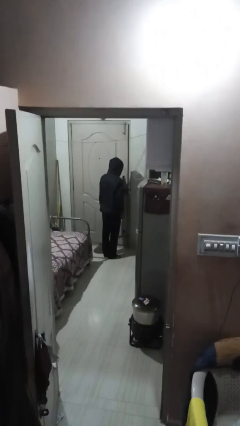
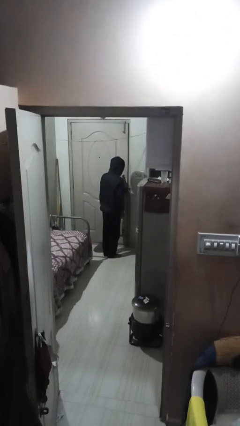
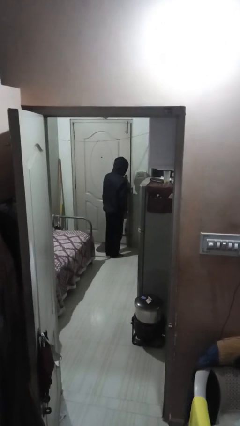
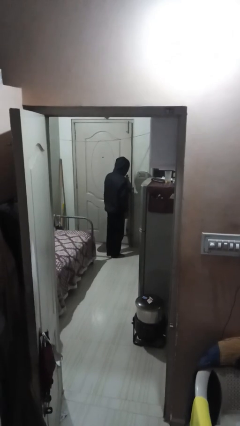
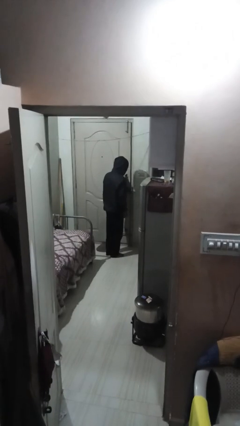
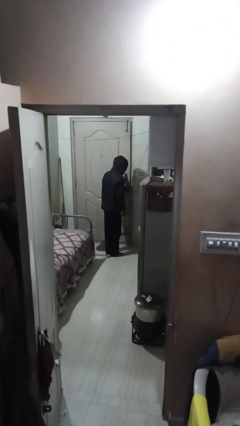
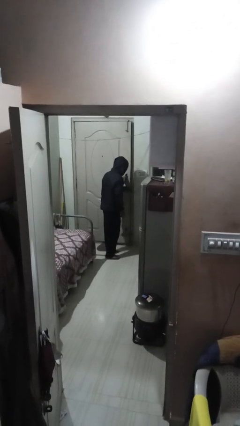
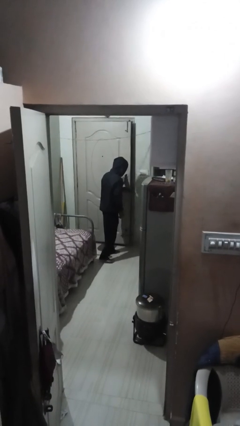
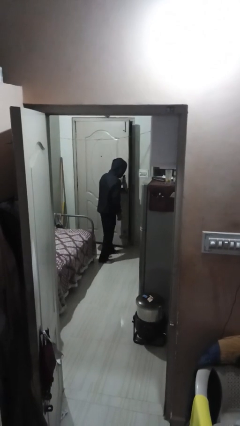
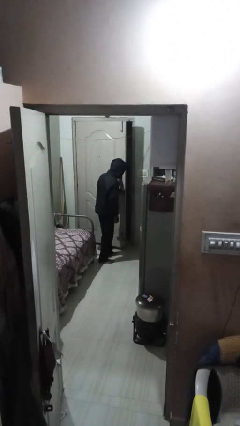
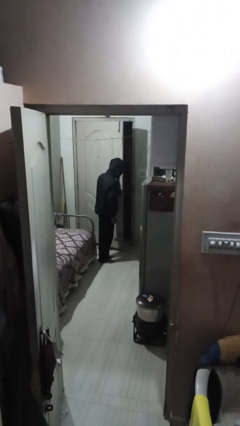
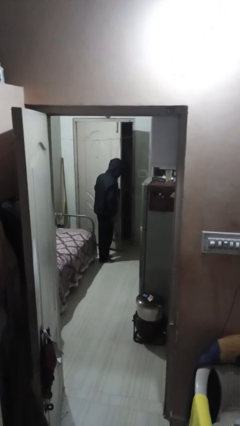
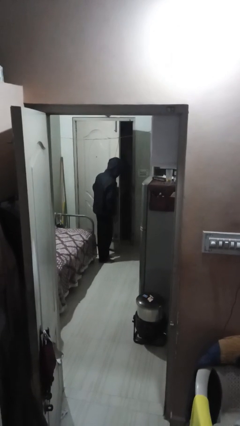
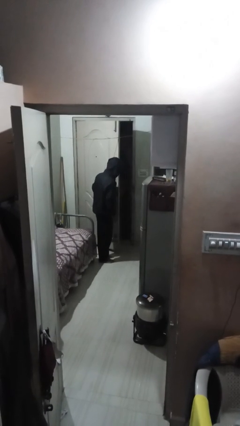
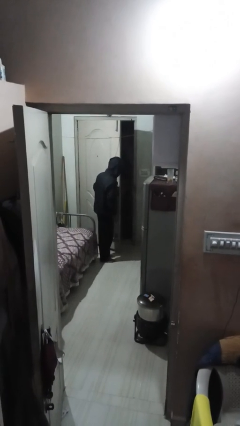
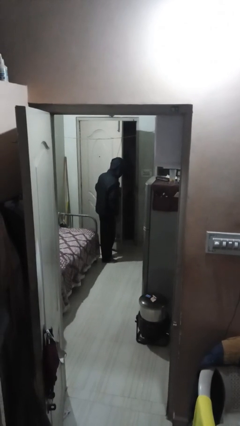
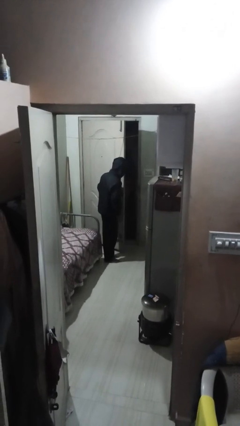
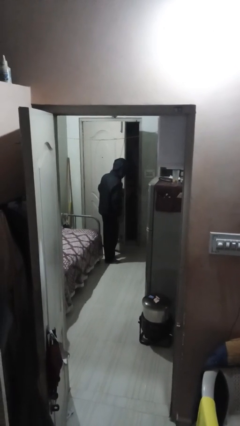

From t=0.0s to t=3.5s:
person opens facility door

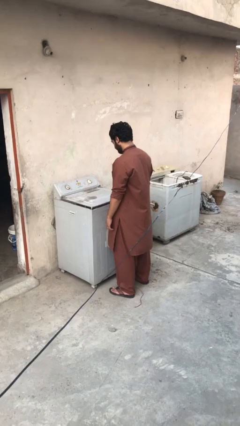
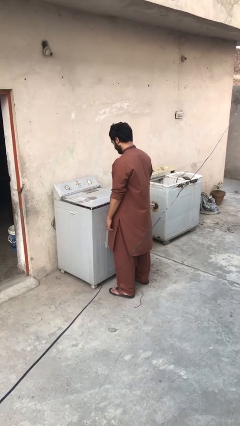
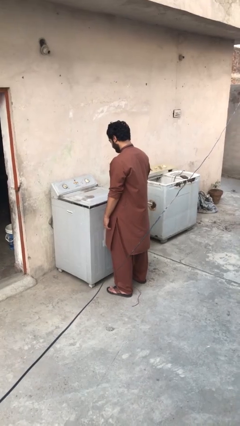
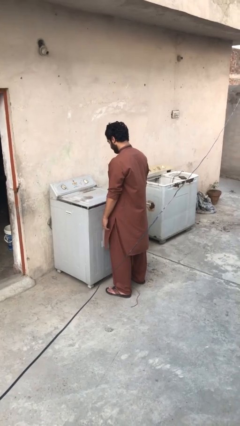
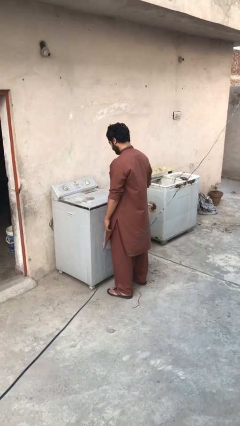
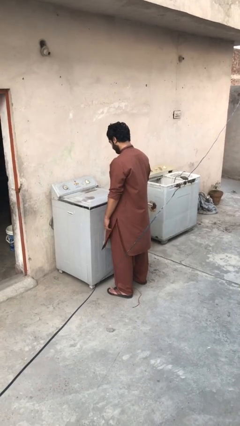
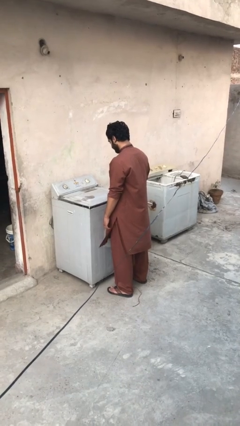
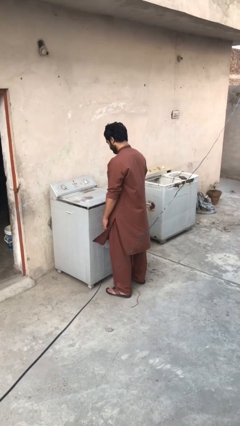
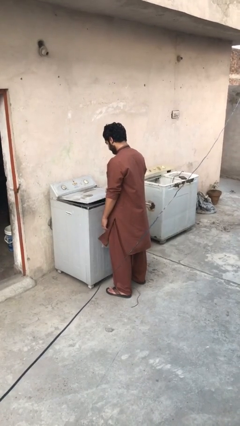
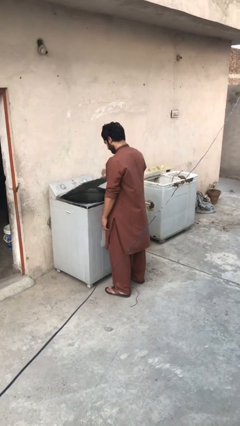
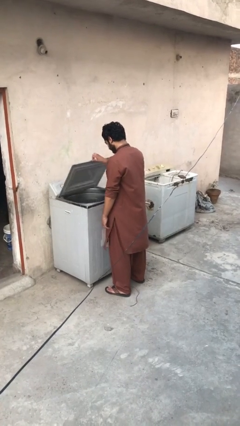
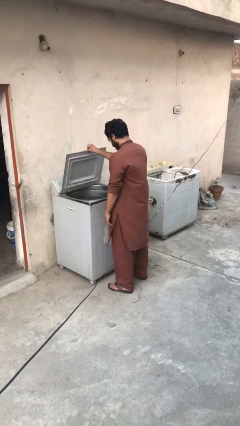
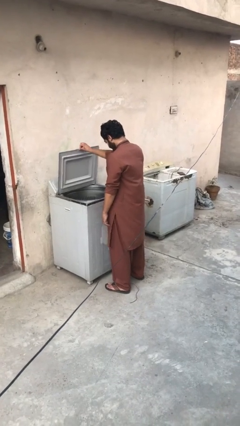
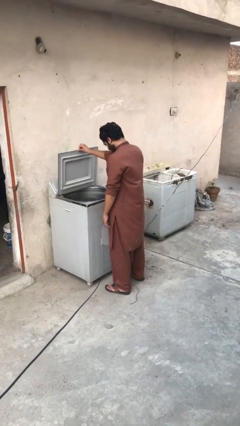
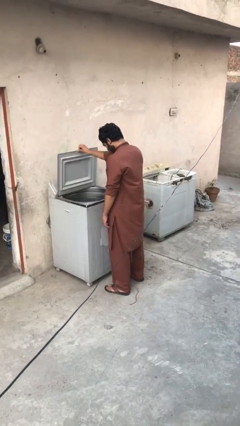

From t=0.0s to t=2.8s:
person opens clothes washer

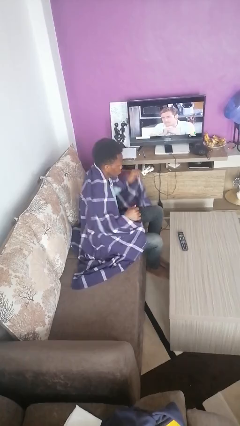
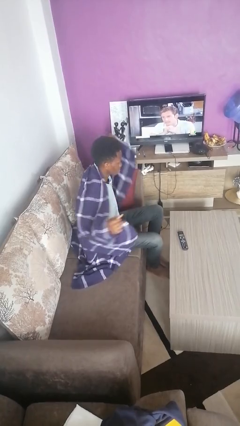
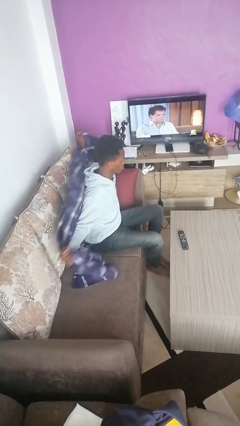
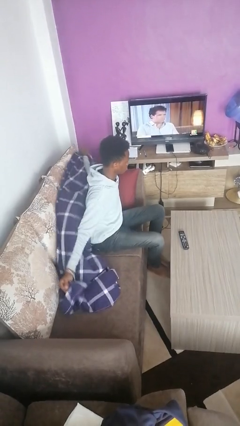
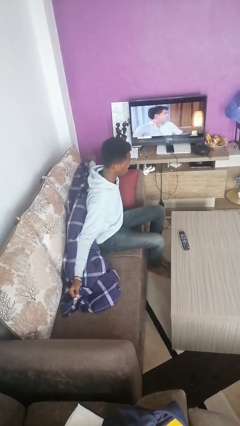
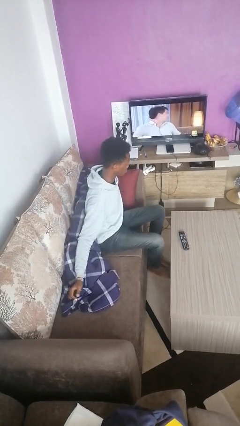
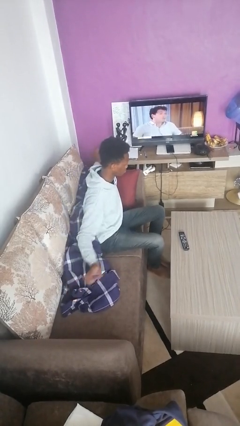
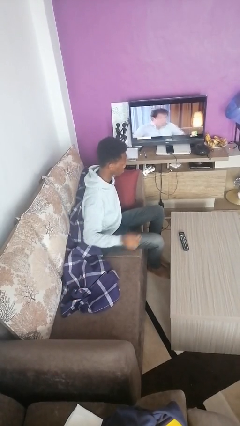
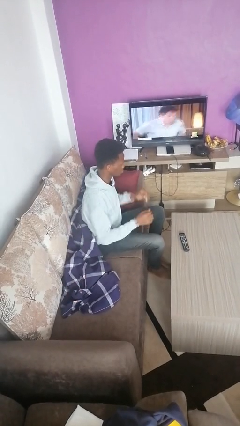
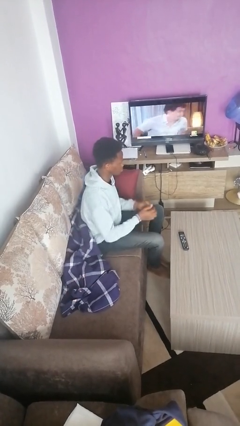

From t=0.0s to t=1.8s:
person uncovers with blanket

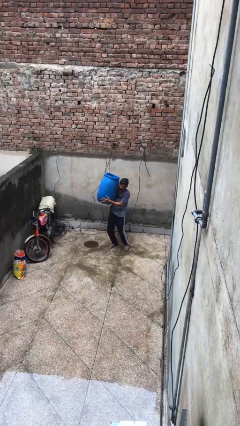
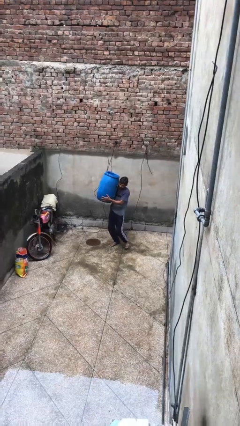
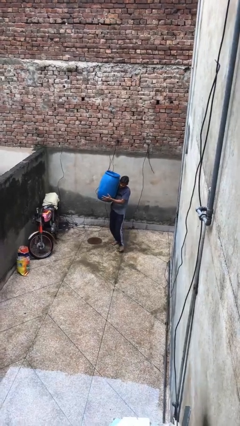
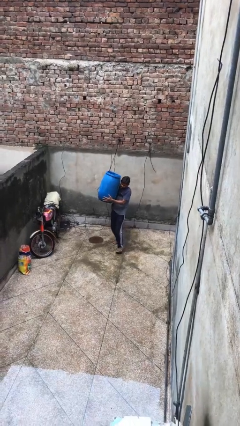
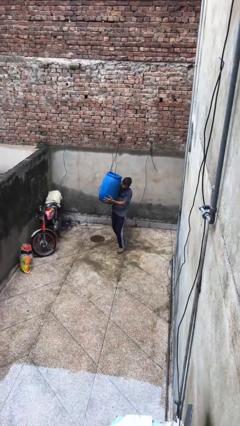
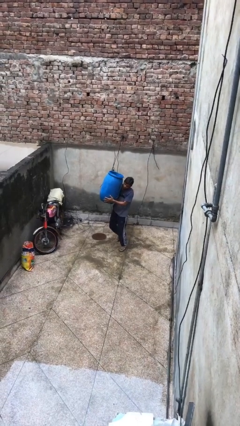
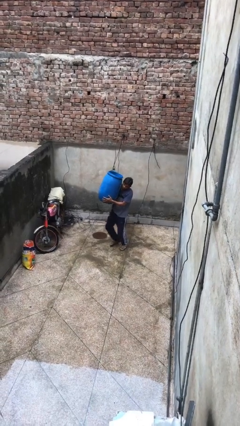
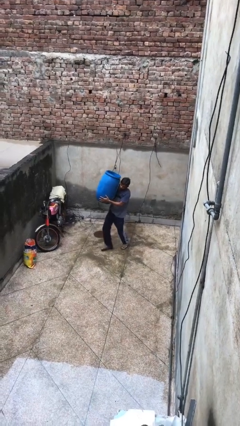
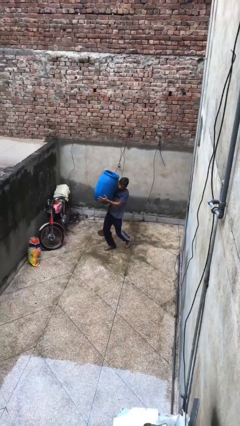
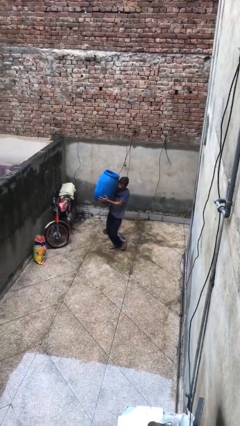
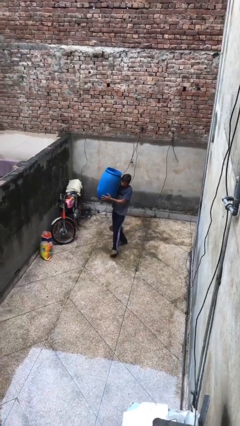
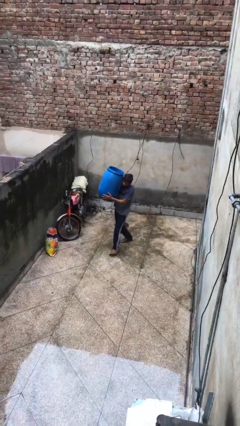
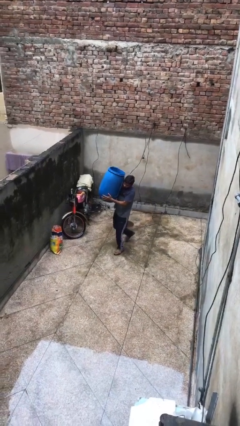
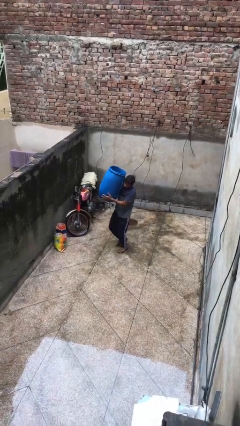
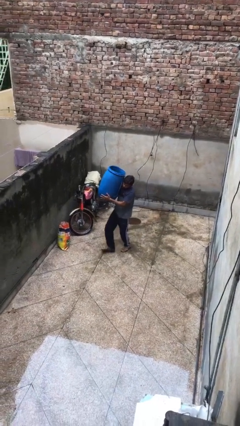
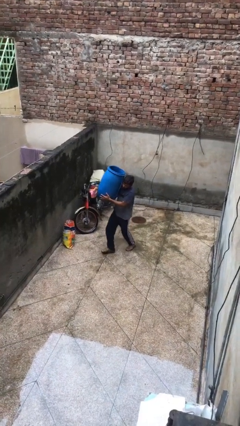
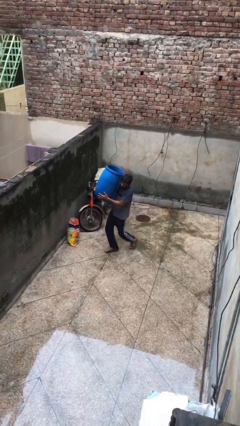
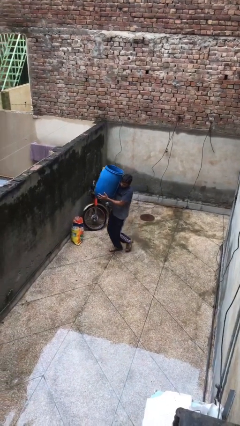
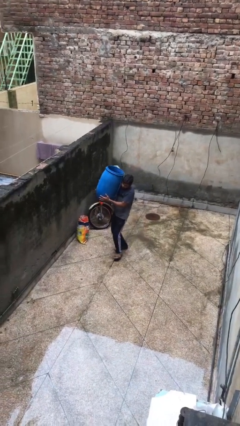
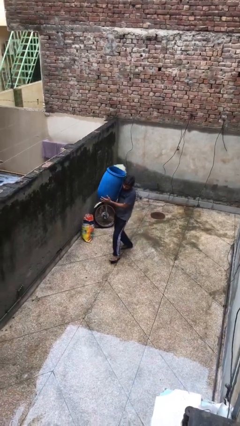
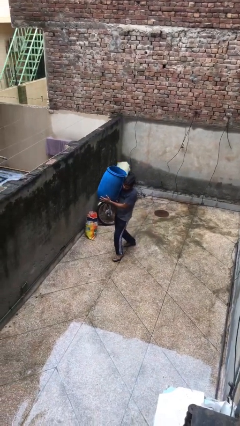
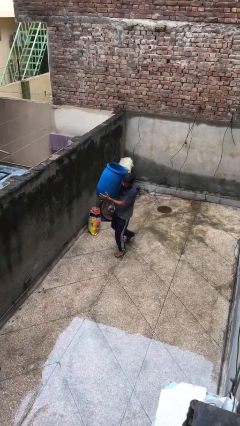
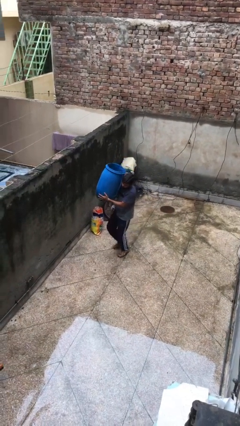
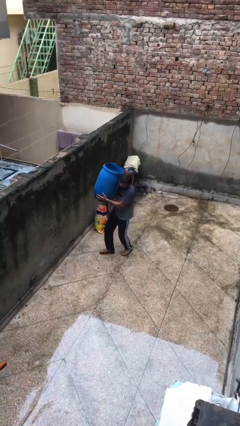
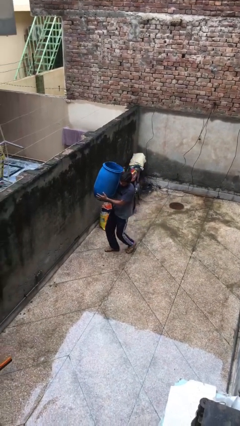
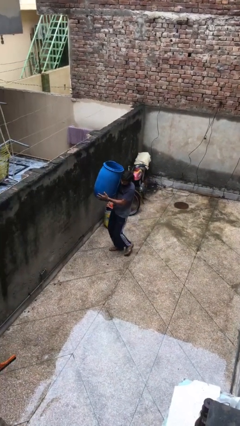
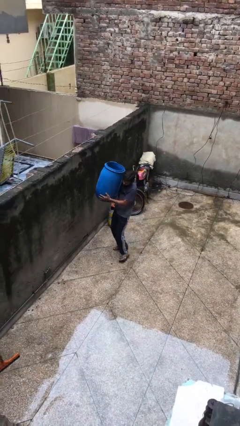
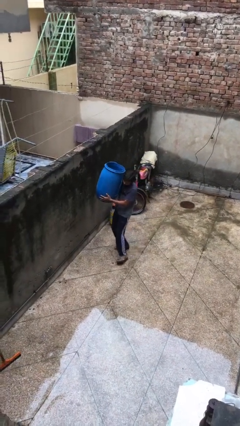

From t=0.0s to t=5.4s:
person carries heavy object

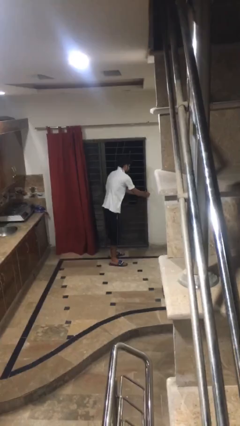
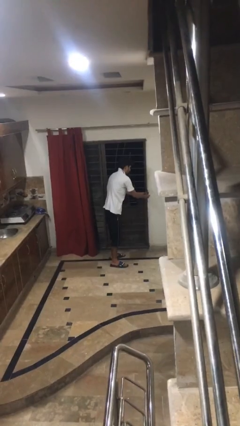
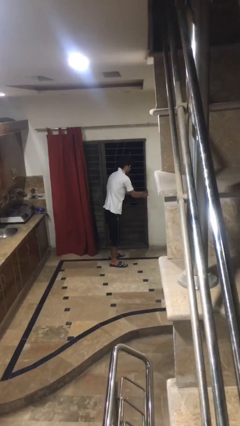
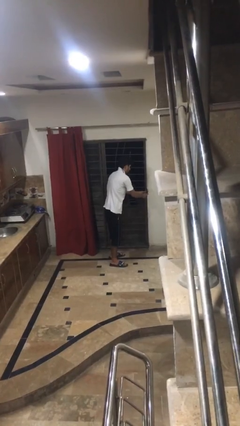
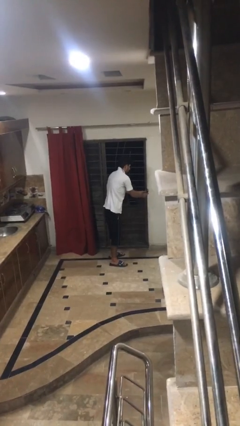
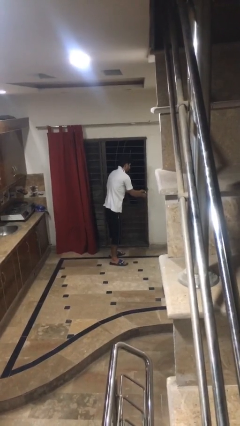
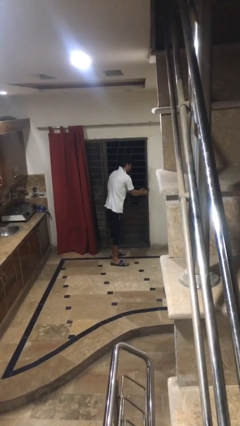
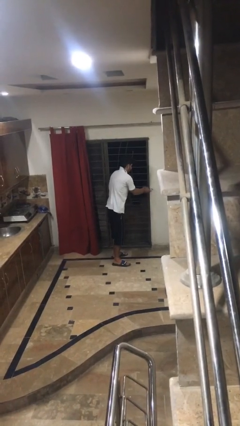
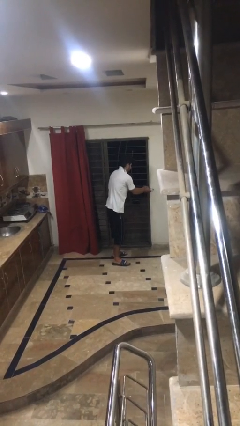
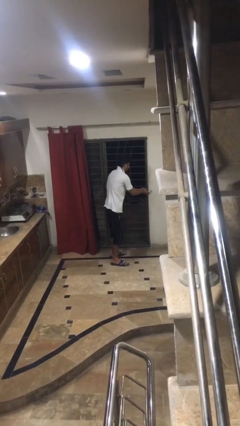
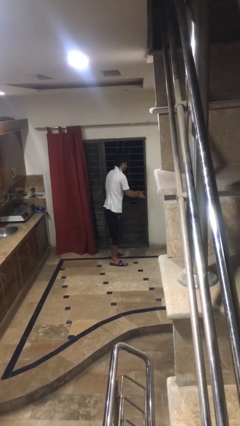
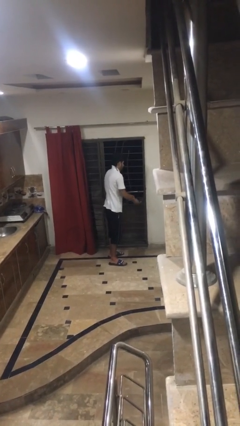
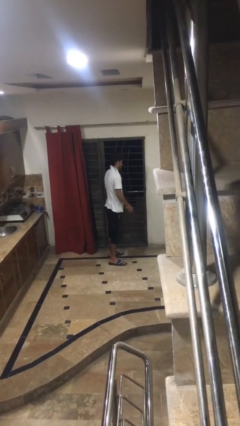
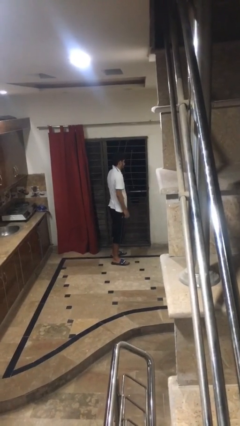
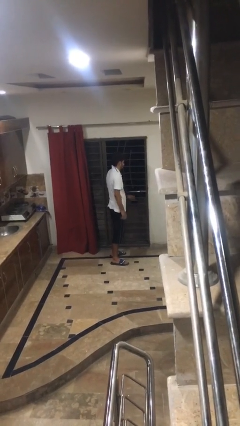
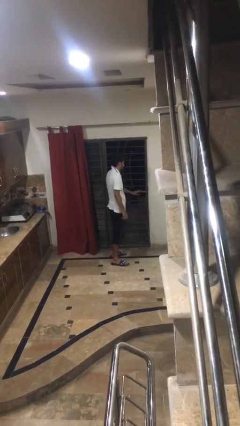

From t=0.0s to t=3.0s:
person unlocks door with keys

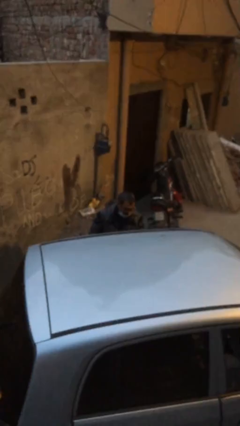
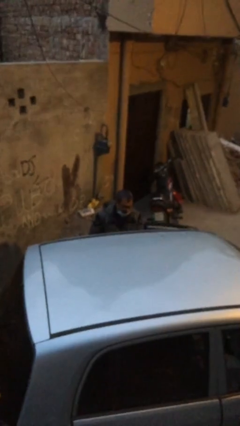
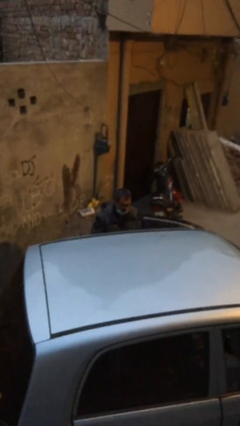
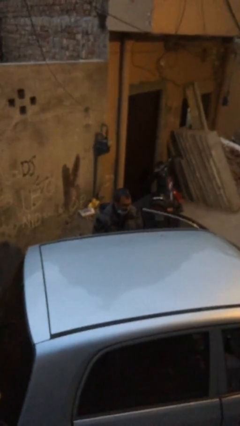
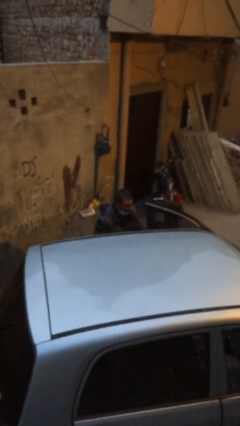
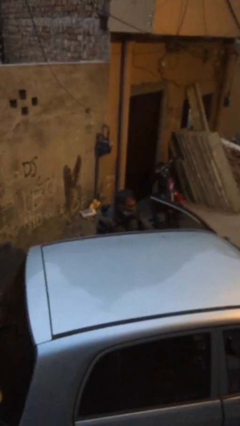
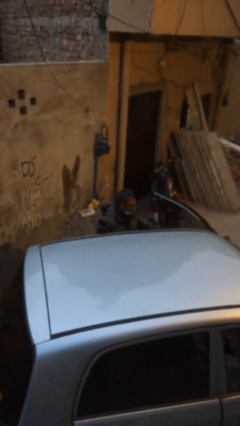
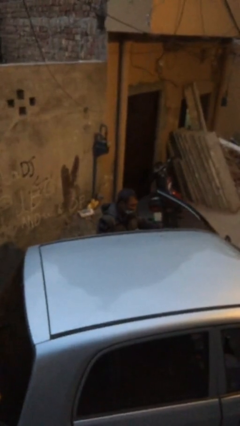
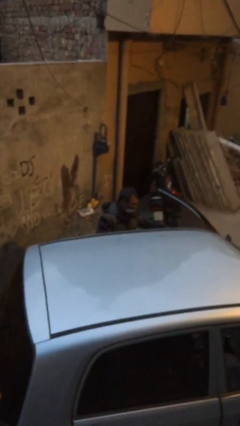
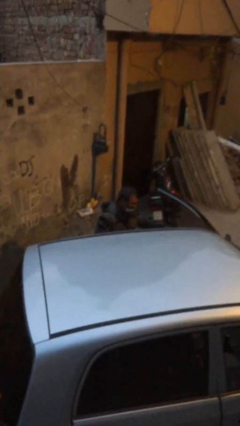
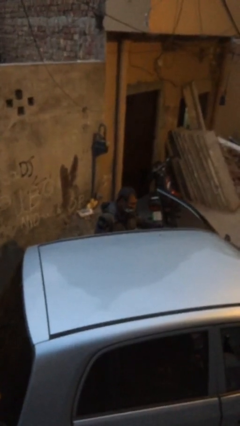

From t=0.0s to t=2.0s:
person opens car door
